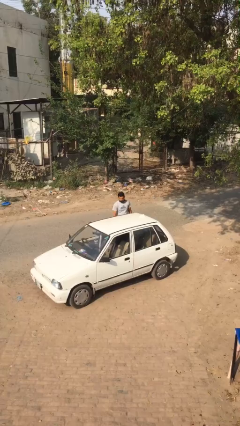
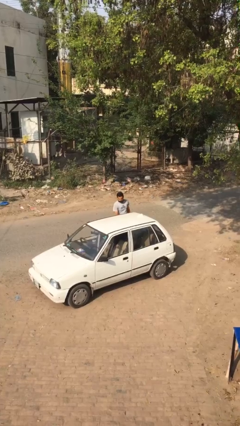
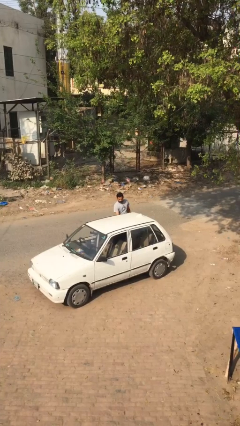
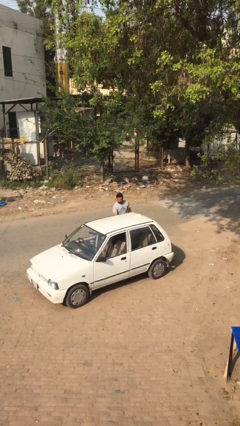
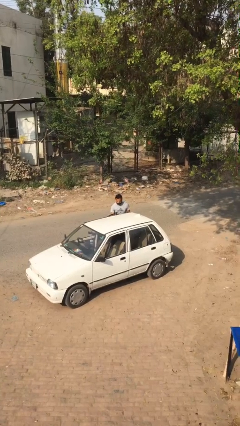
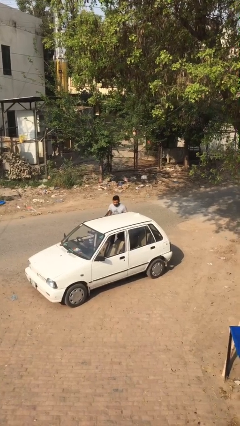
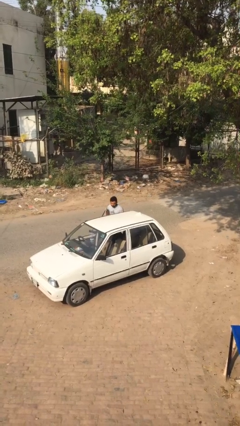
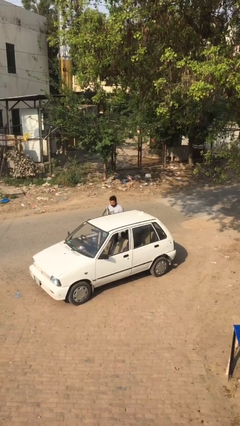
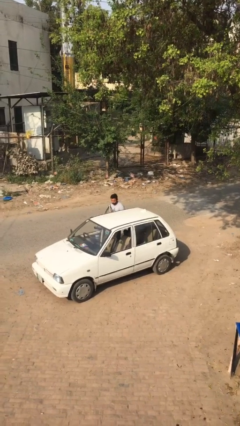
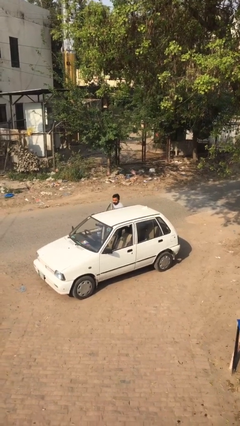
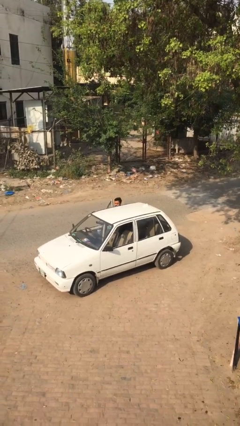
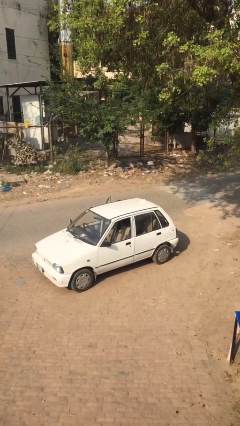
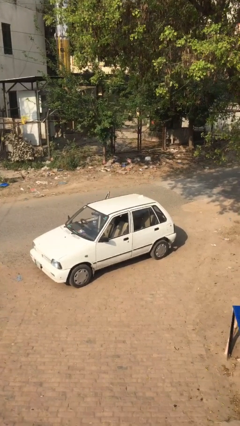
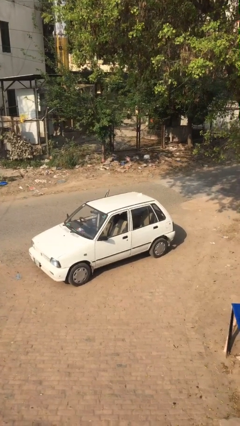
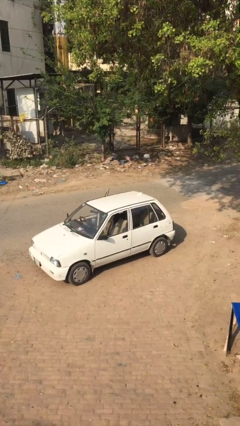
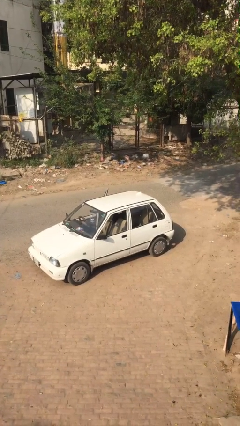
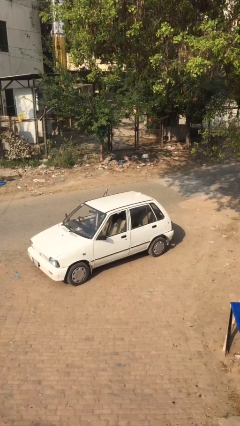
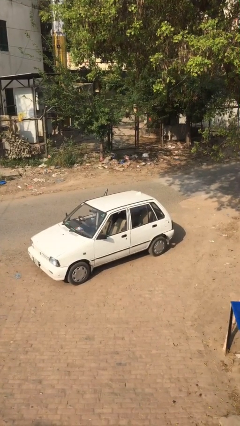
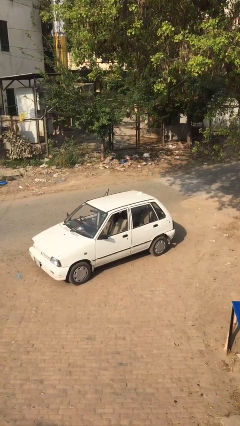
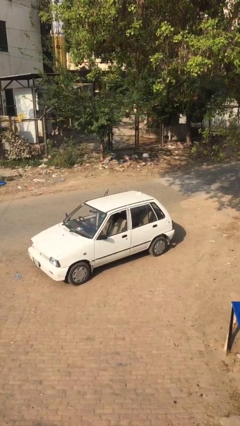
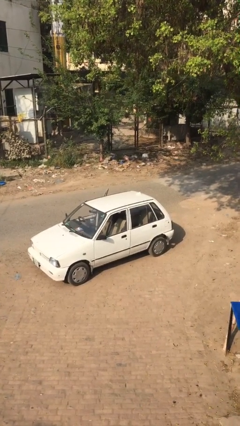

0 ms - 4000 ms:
person enters car

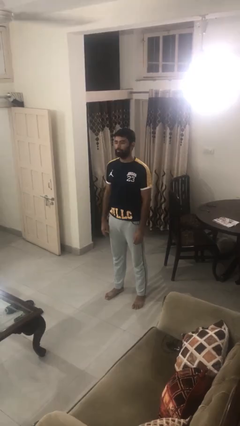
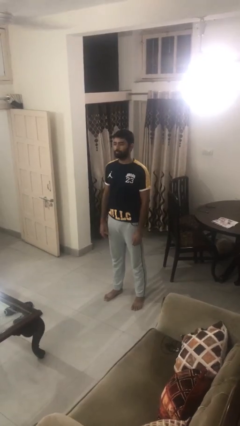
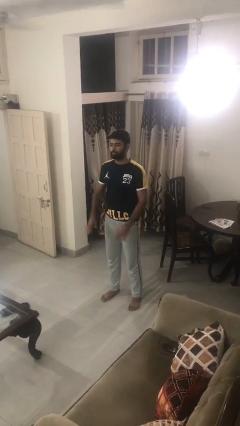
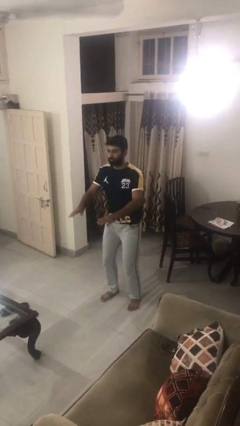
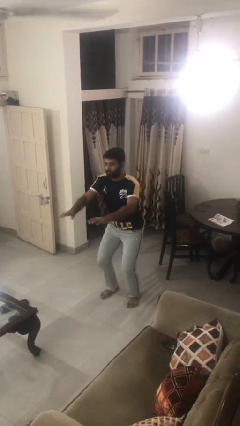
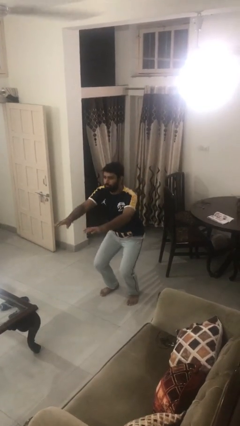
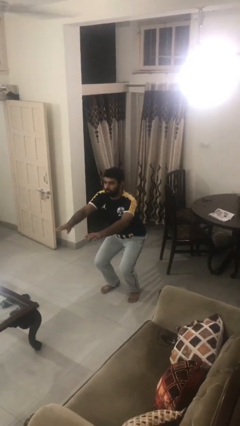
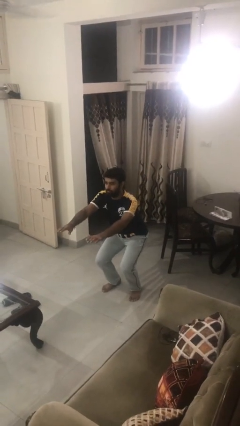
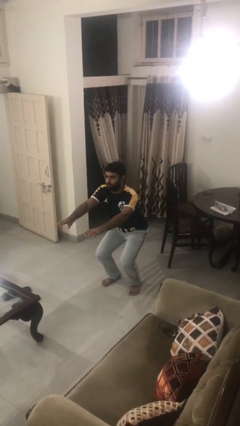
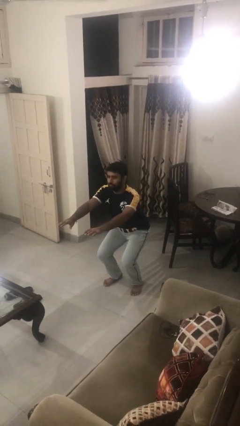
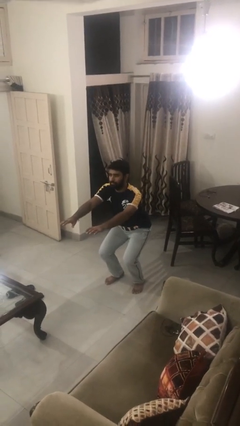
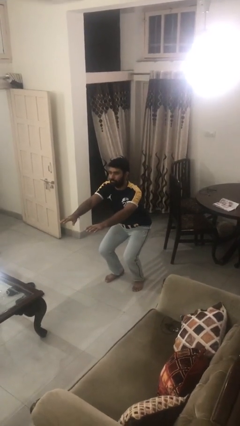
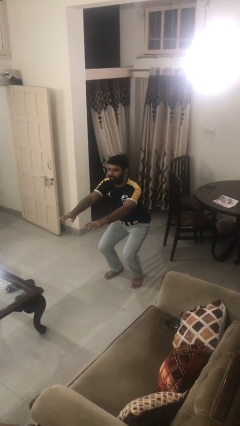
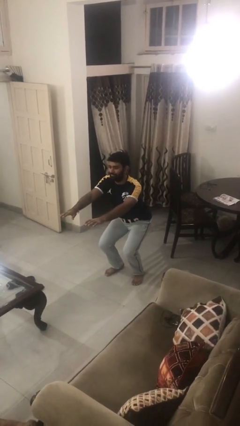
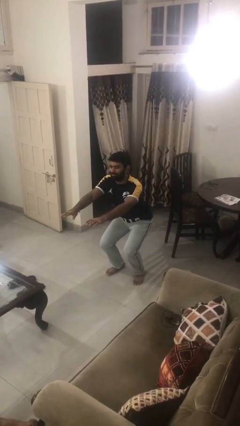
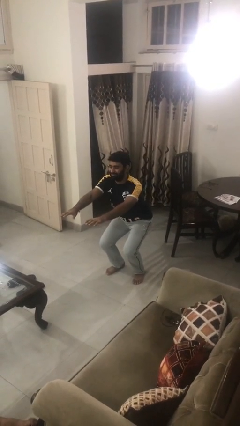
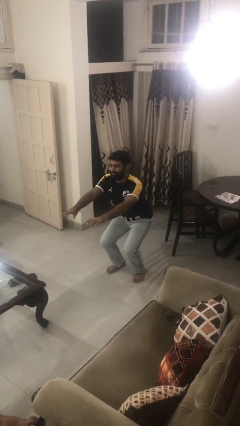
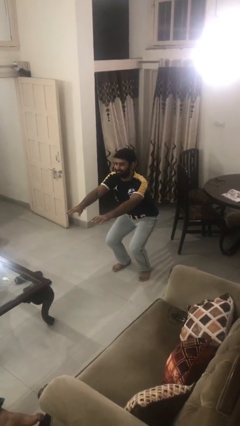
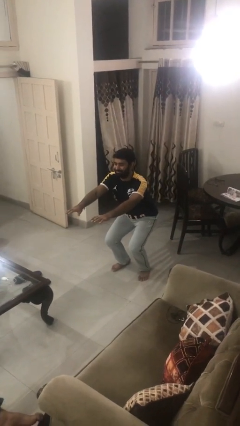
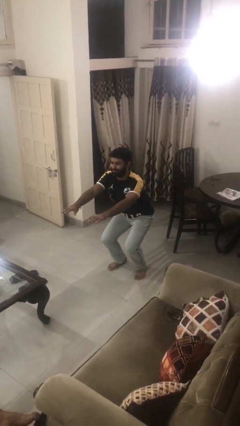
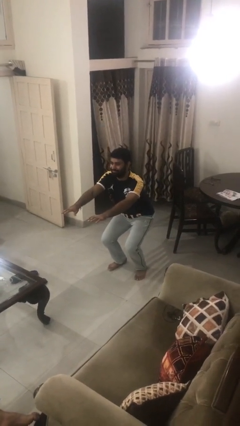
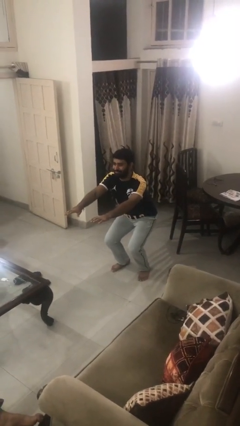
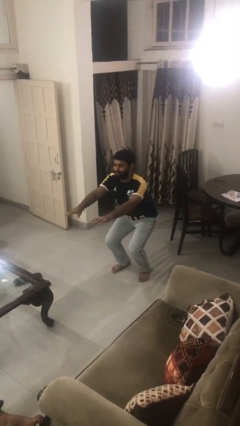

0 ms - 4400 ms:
person squats

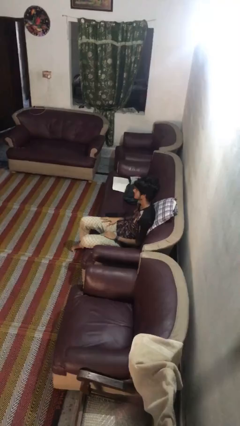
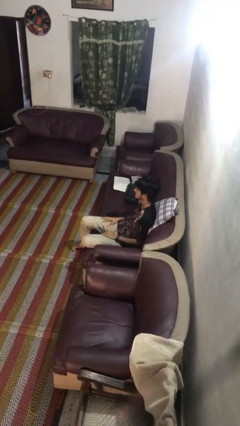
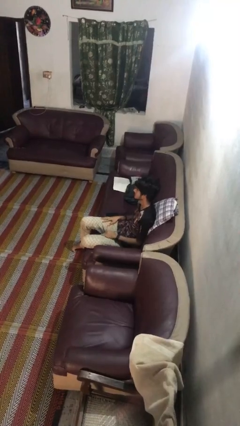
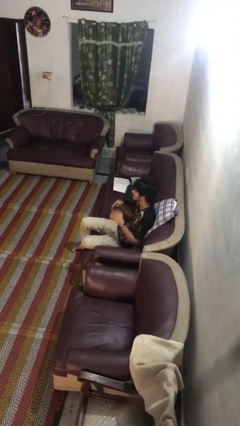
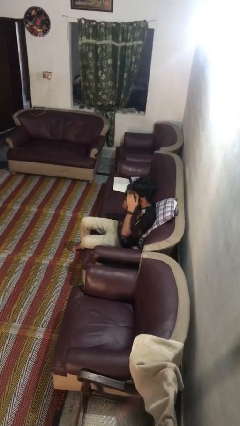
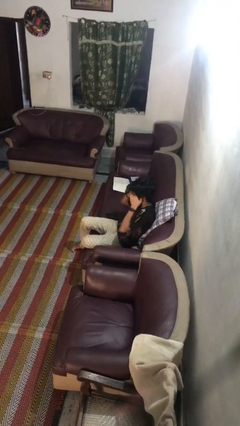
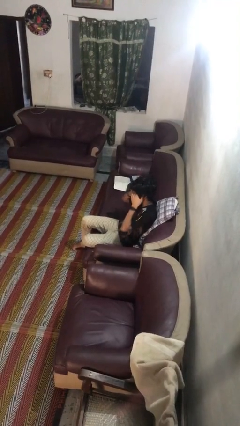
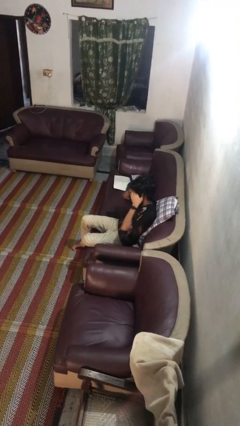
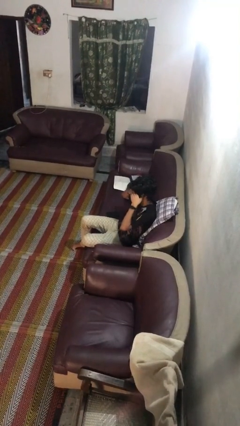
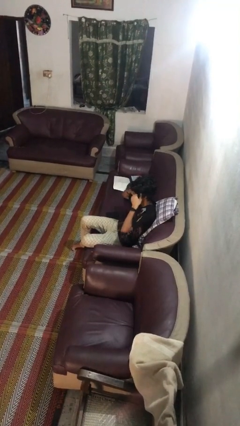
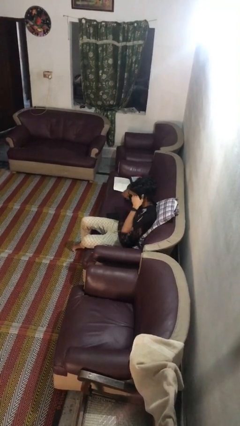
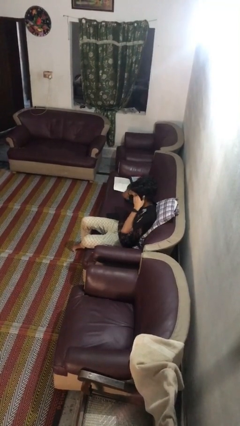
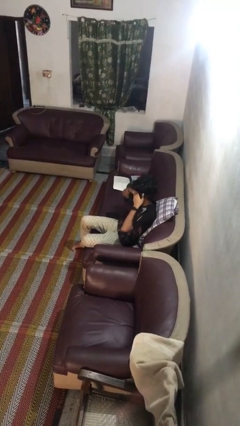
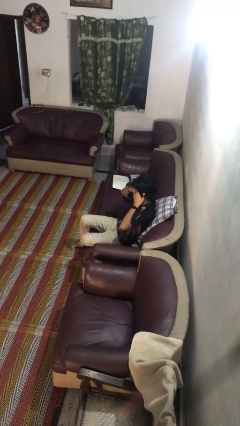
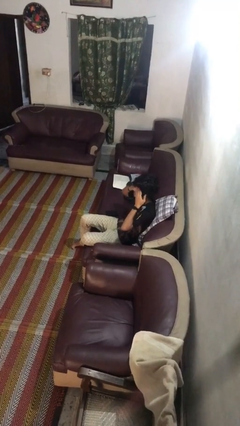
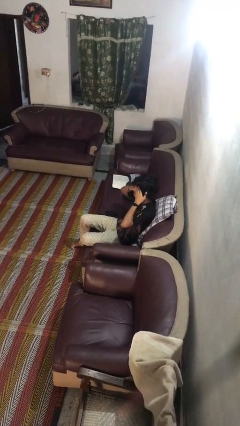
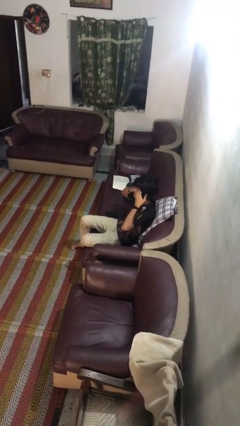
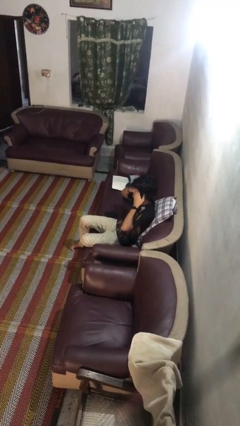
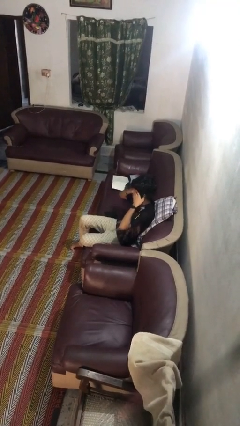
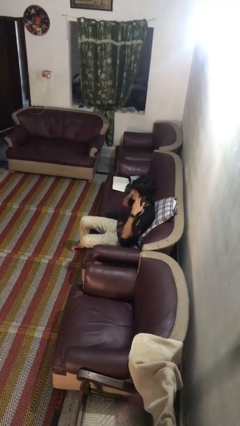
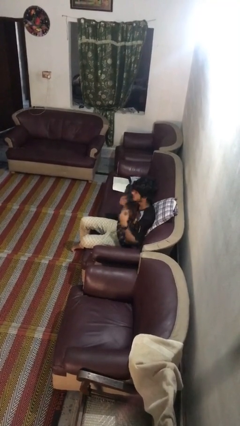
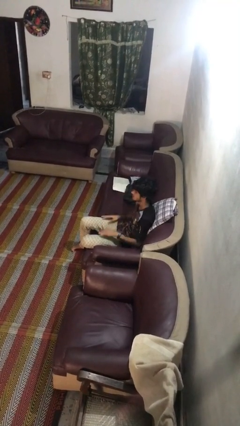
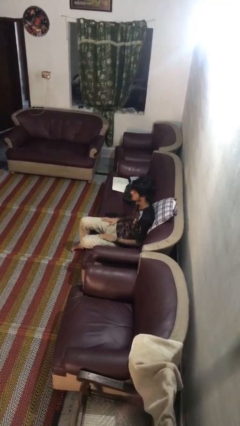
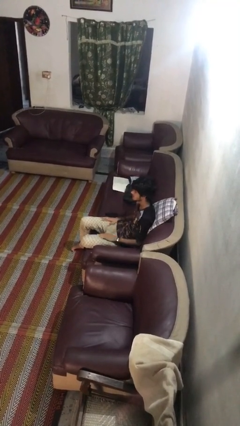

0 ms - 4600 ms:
person rubs eyes

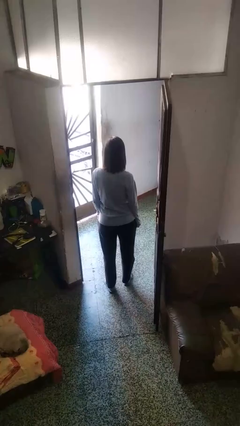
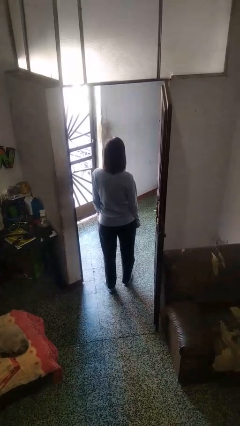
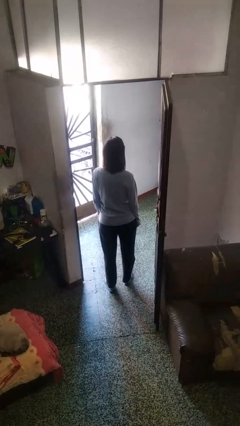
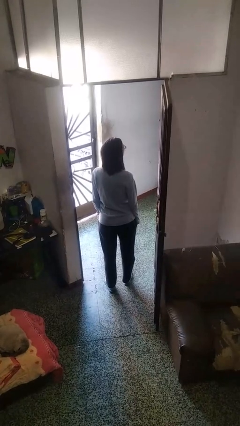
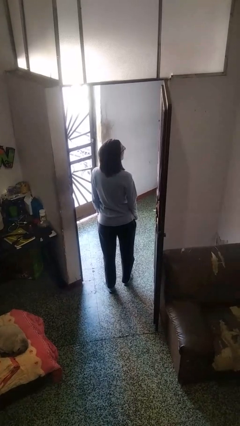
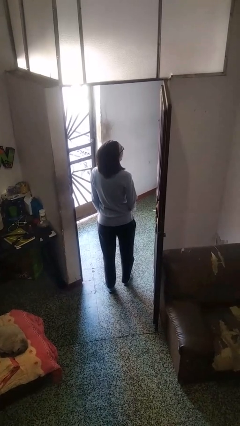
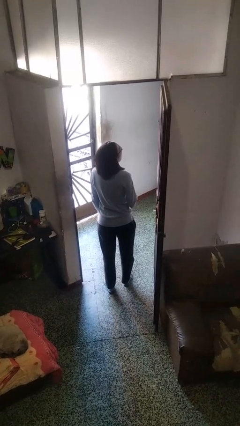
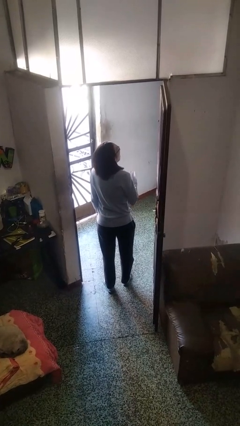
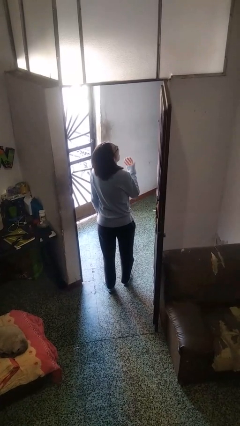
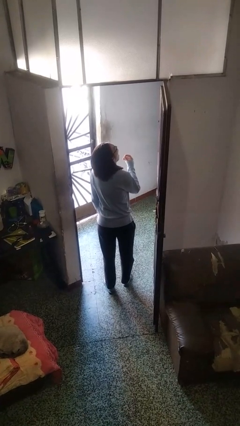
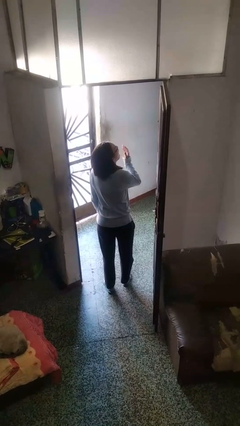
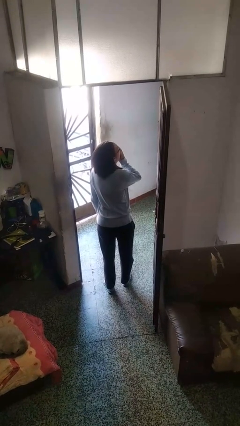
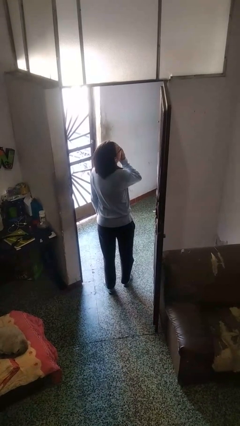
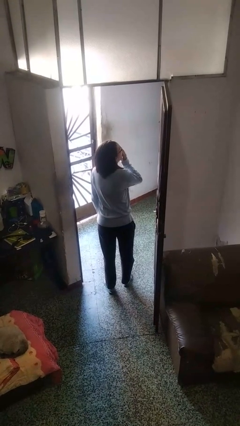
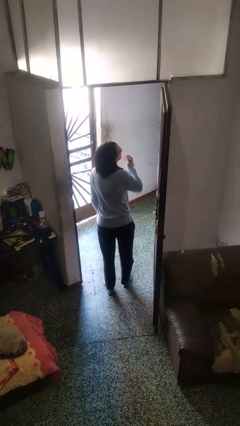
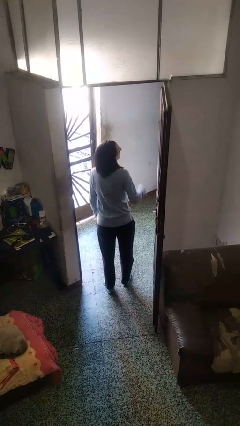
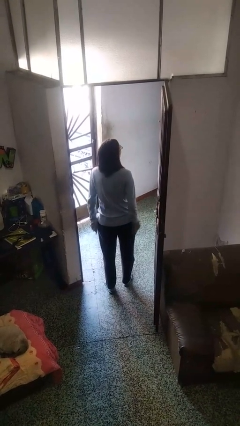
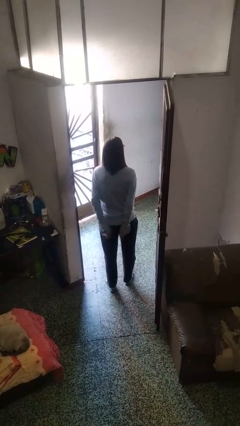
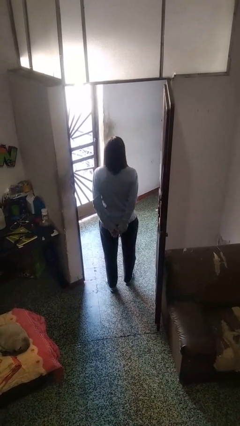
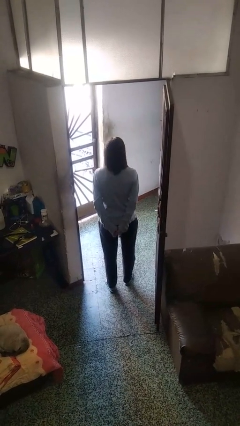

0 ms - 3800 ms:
person yawns

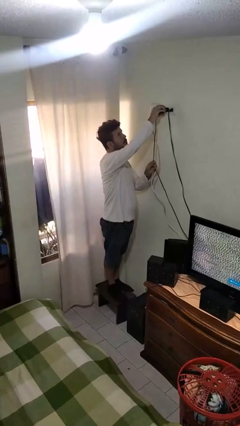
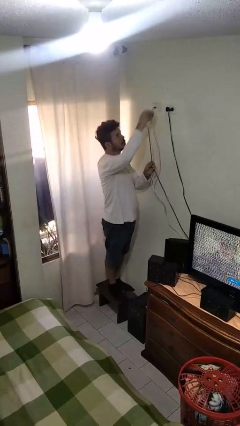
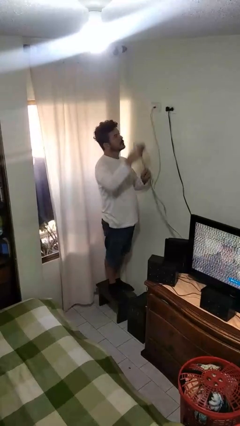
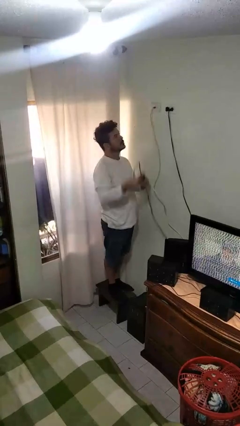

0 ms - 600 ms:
person unplugs from electrical socket
